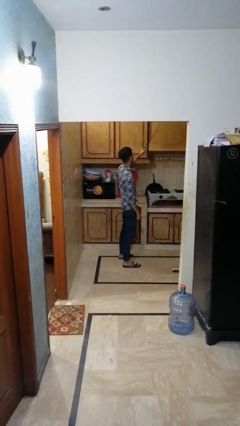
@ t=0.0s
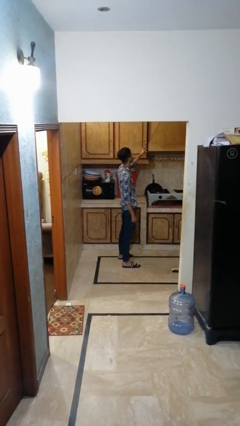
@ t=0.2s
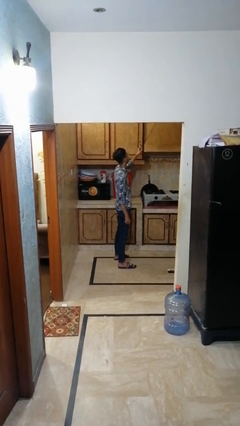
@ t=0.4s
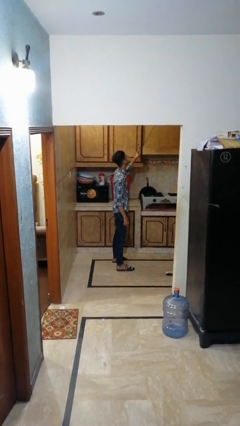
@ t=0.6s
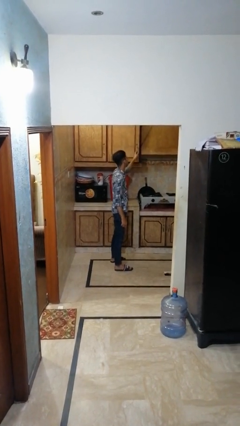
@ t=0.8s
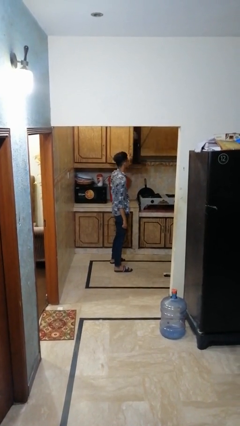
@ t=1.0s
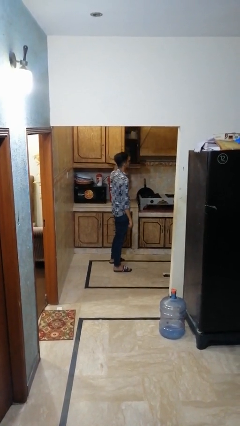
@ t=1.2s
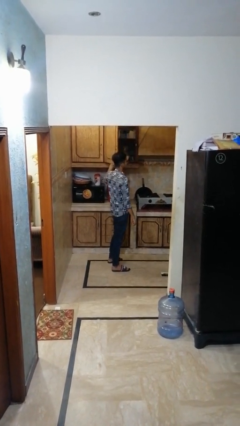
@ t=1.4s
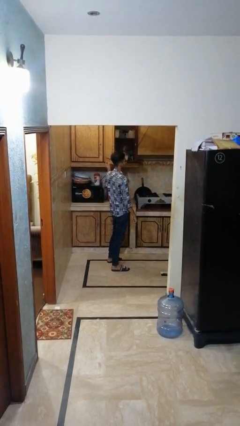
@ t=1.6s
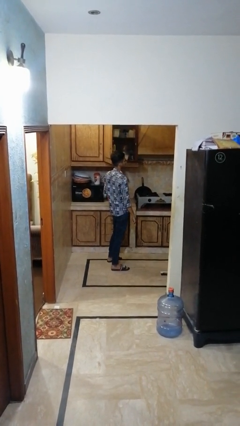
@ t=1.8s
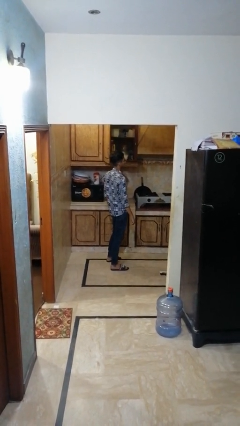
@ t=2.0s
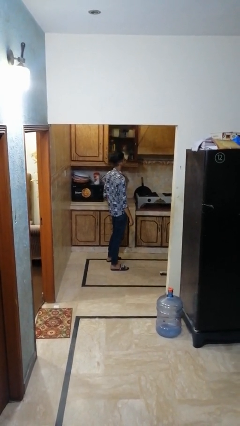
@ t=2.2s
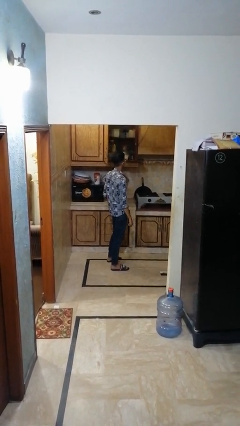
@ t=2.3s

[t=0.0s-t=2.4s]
person opens cabinet

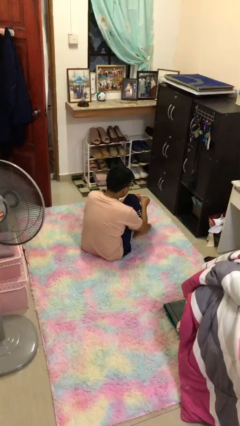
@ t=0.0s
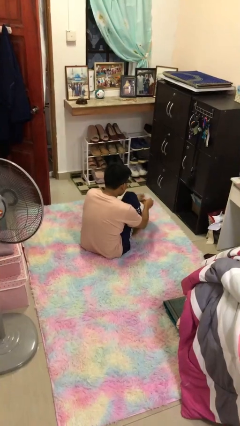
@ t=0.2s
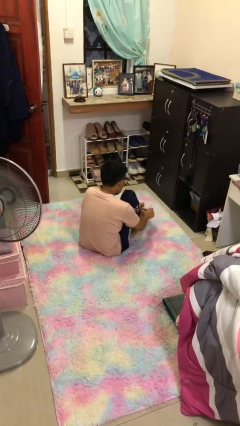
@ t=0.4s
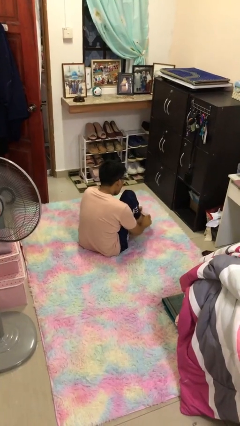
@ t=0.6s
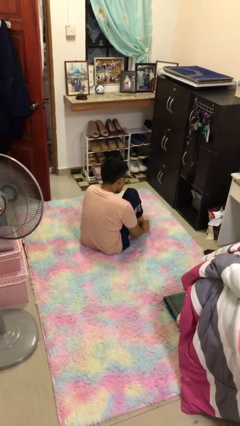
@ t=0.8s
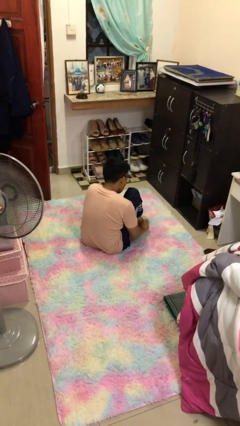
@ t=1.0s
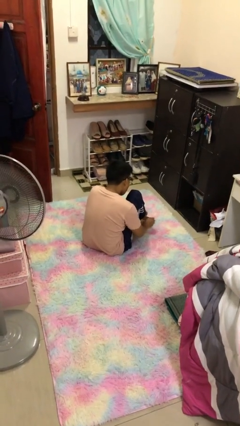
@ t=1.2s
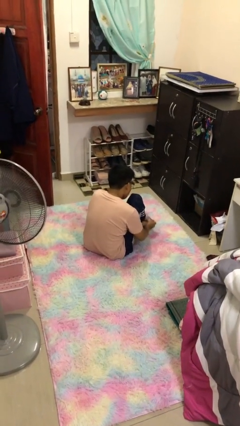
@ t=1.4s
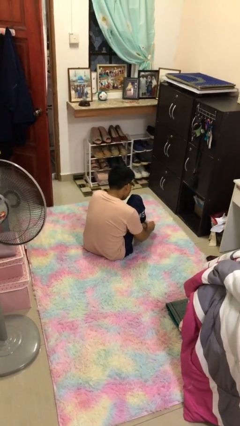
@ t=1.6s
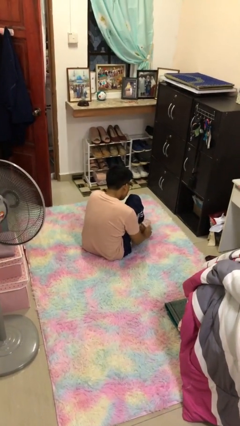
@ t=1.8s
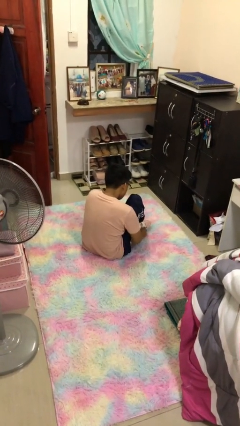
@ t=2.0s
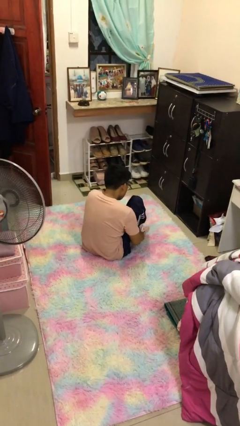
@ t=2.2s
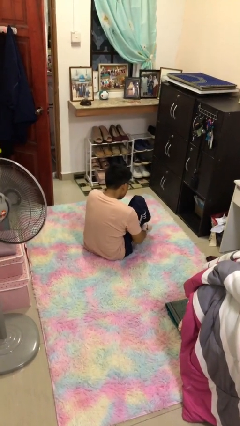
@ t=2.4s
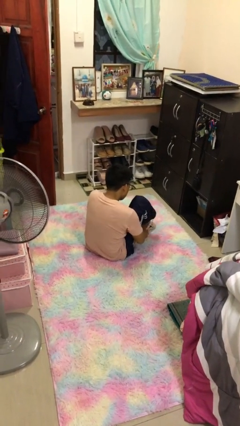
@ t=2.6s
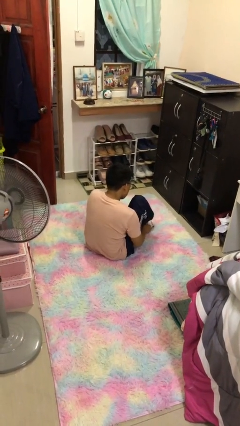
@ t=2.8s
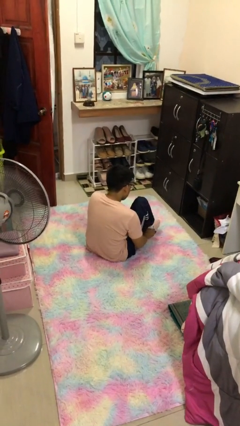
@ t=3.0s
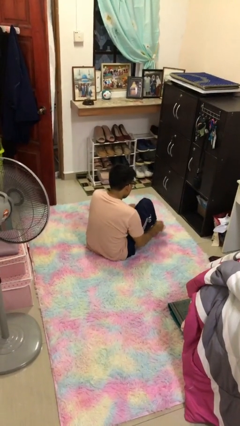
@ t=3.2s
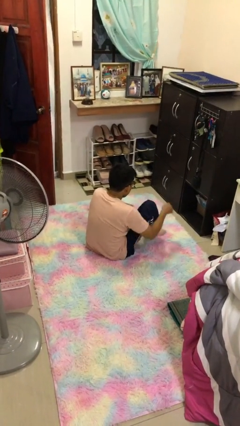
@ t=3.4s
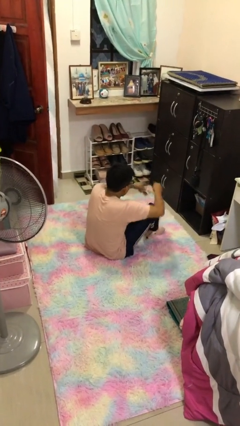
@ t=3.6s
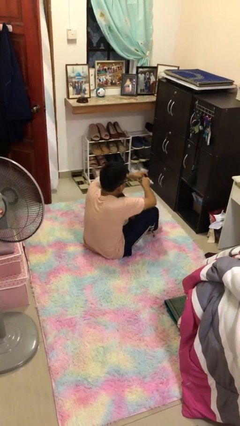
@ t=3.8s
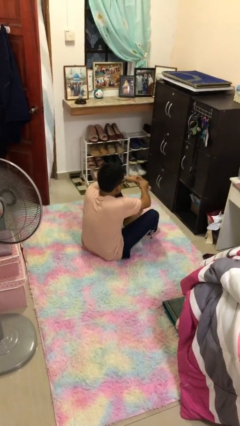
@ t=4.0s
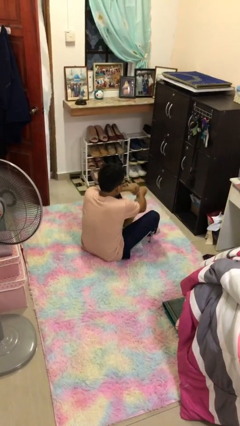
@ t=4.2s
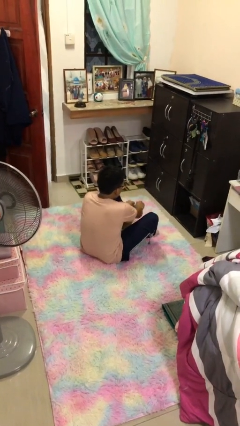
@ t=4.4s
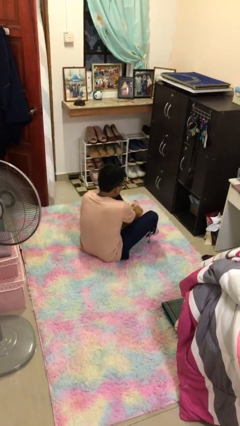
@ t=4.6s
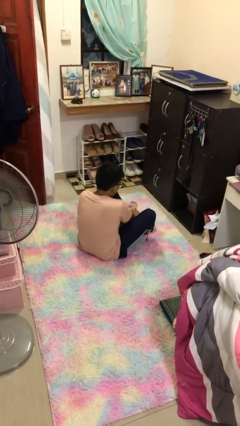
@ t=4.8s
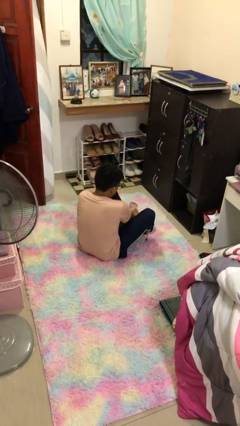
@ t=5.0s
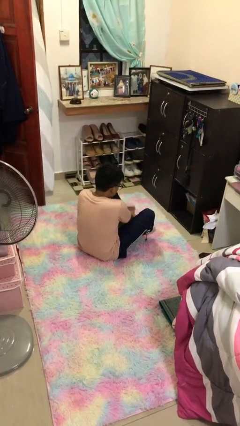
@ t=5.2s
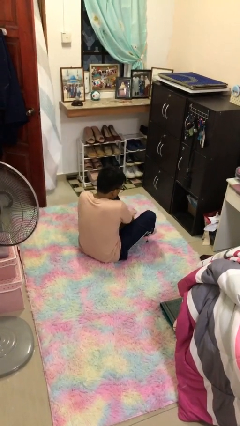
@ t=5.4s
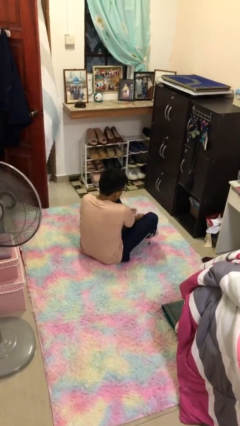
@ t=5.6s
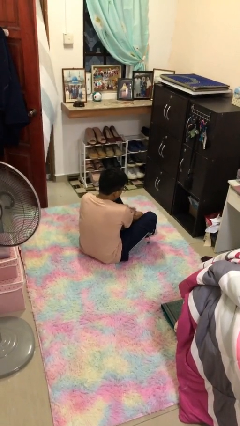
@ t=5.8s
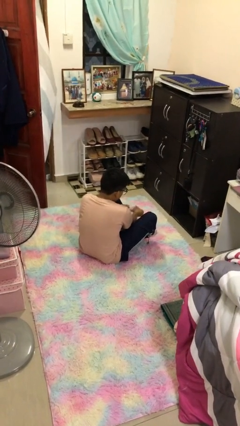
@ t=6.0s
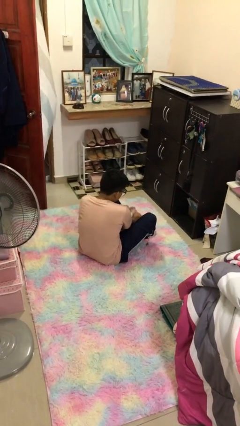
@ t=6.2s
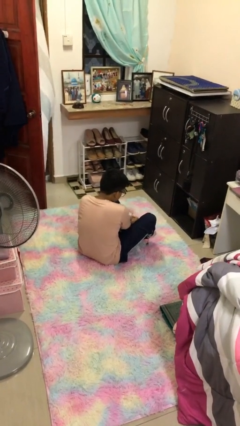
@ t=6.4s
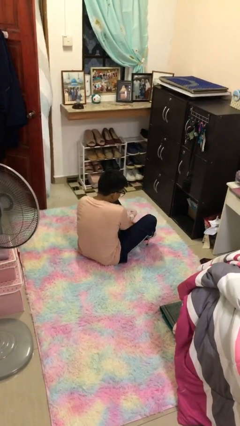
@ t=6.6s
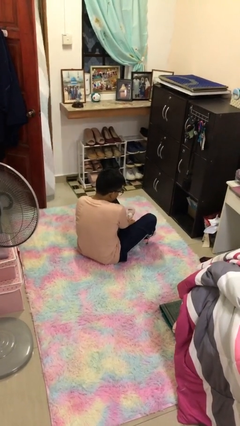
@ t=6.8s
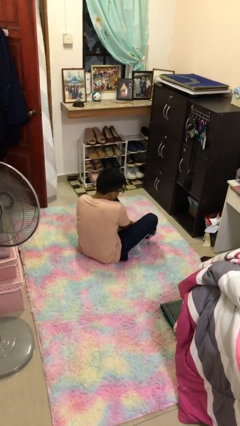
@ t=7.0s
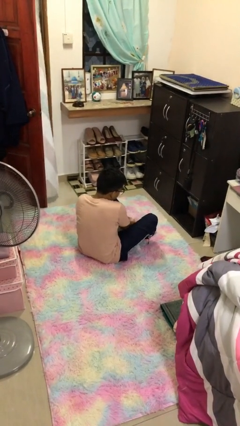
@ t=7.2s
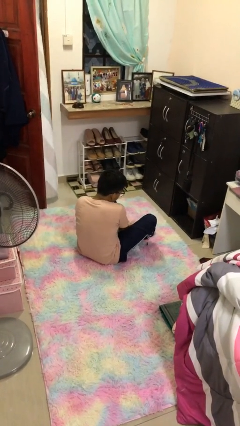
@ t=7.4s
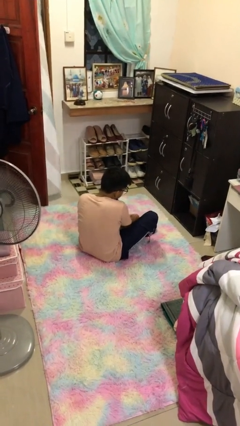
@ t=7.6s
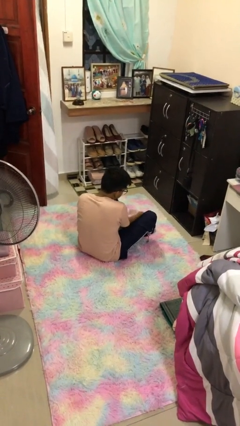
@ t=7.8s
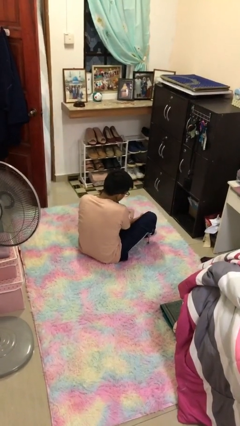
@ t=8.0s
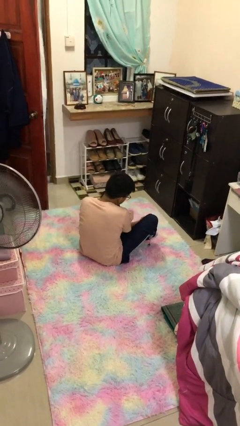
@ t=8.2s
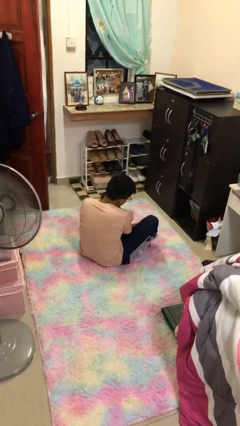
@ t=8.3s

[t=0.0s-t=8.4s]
person puts on socks

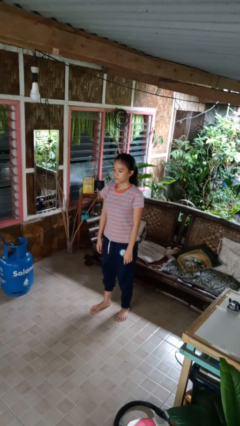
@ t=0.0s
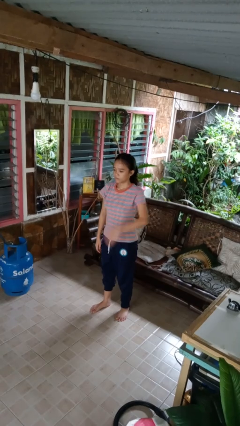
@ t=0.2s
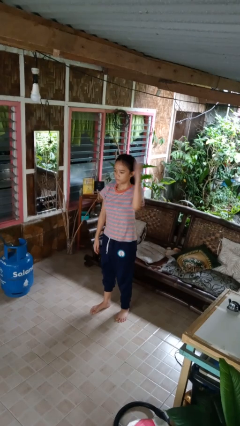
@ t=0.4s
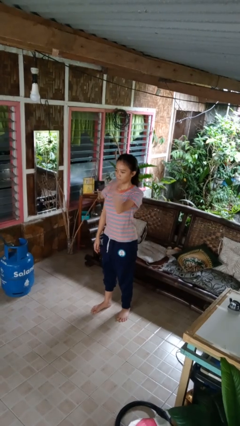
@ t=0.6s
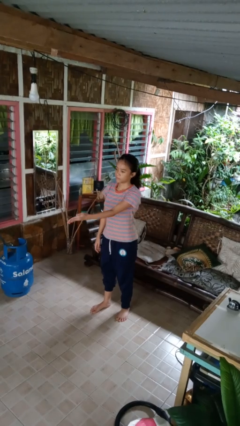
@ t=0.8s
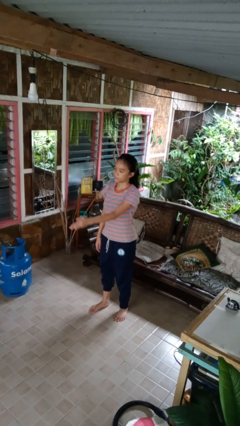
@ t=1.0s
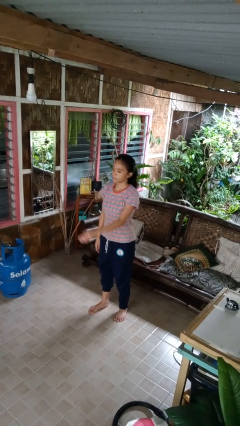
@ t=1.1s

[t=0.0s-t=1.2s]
person karate chop

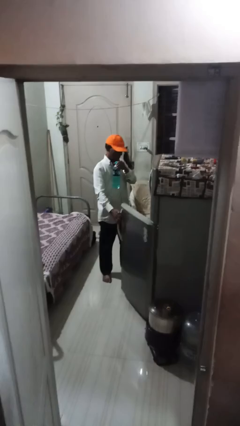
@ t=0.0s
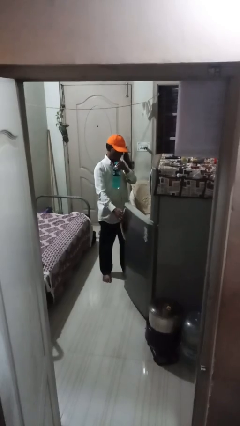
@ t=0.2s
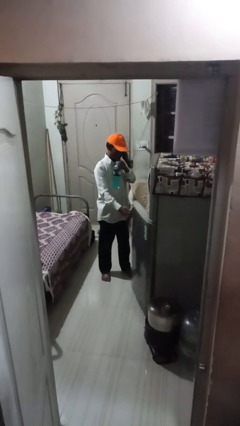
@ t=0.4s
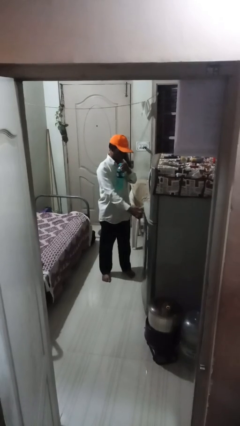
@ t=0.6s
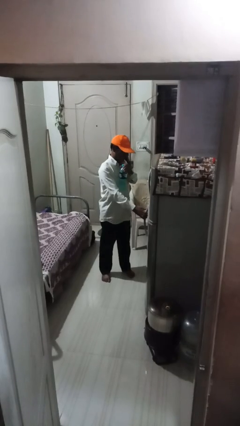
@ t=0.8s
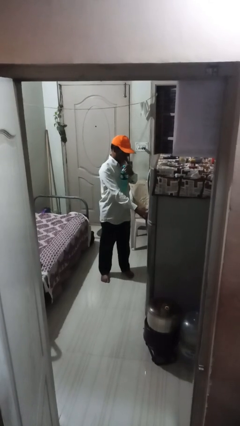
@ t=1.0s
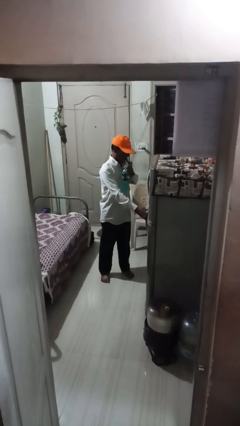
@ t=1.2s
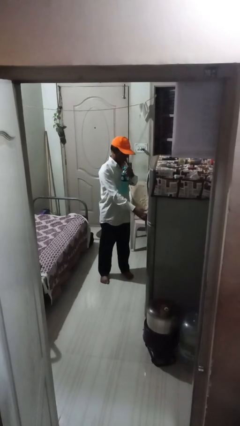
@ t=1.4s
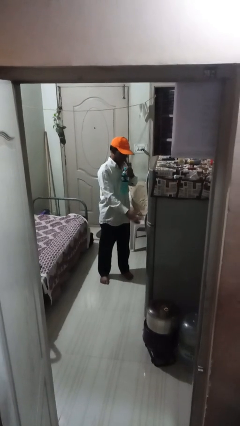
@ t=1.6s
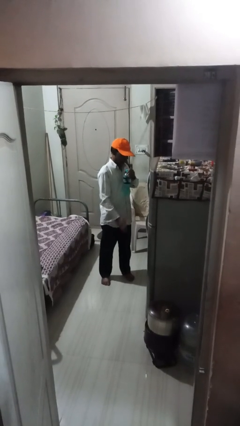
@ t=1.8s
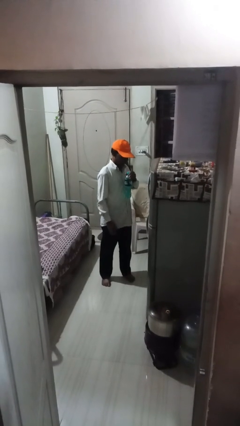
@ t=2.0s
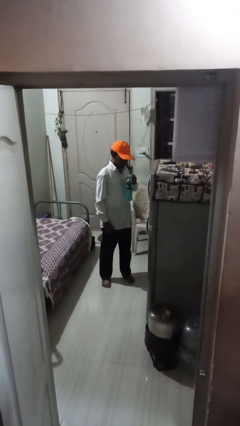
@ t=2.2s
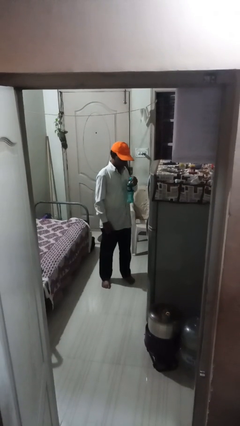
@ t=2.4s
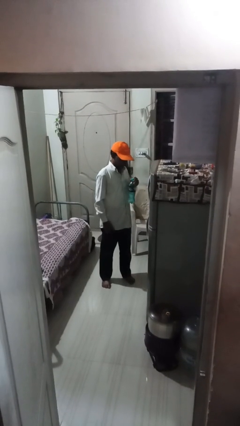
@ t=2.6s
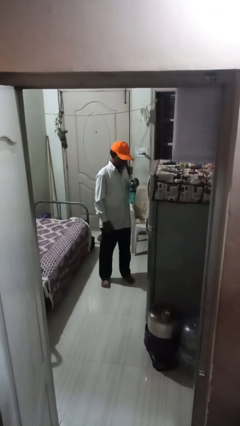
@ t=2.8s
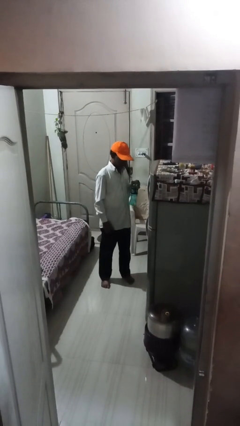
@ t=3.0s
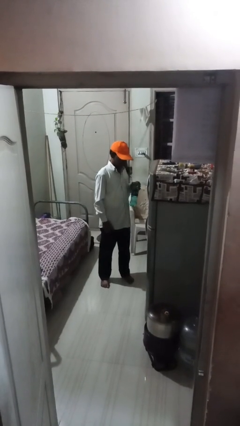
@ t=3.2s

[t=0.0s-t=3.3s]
person closes refrigerator

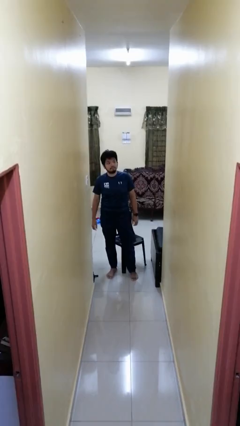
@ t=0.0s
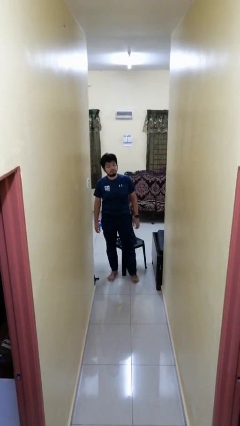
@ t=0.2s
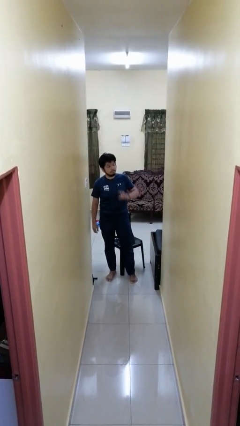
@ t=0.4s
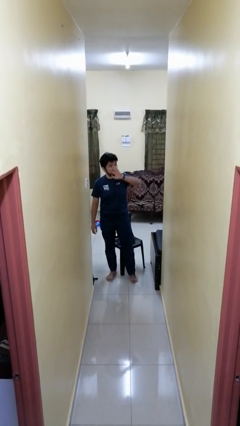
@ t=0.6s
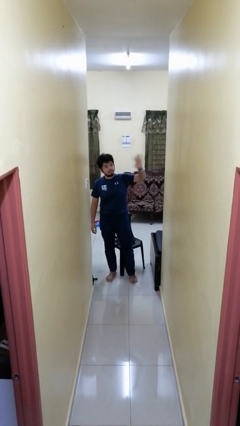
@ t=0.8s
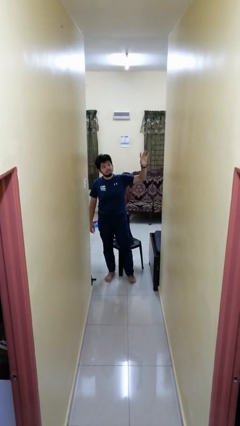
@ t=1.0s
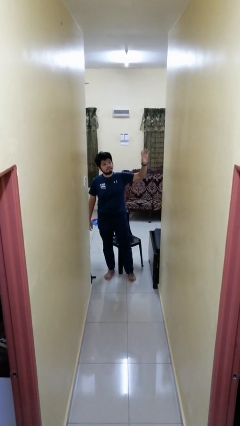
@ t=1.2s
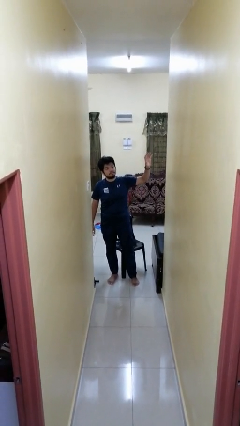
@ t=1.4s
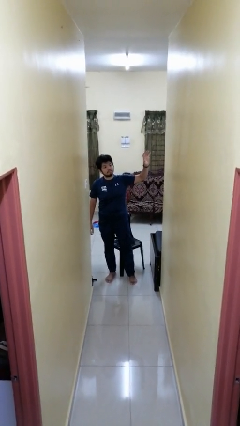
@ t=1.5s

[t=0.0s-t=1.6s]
person gestures swipe left

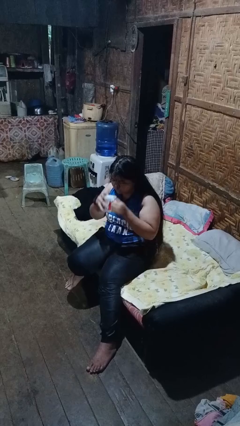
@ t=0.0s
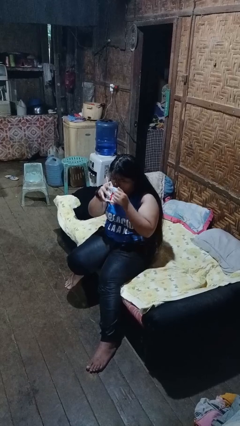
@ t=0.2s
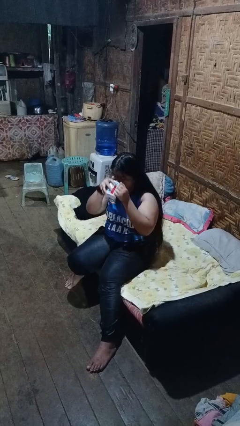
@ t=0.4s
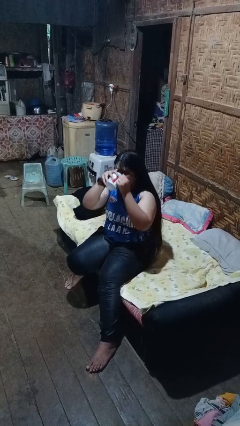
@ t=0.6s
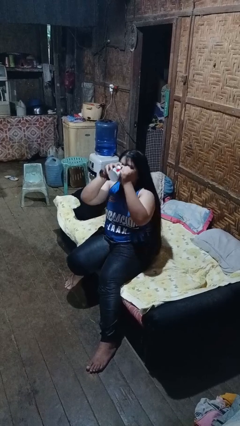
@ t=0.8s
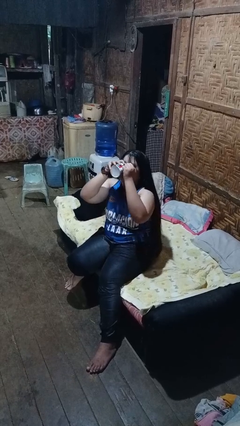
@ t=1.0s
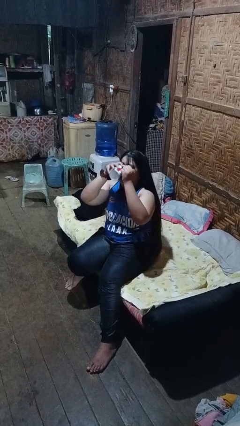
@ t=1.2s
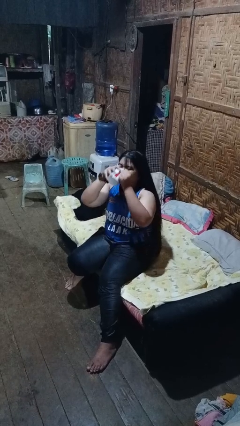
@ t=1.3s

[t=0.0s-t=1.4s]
person drinks from mug
